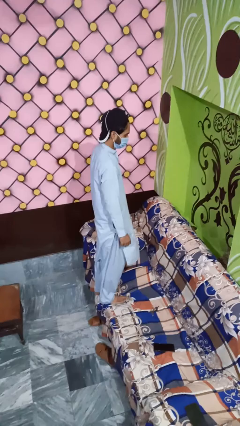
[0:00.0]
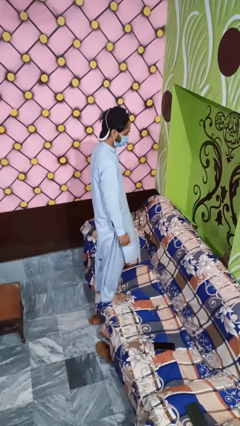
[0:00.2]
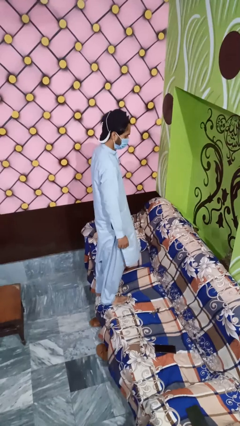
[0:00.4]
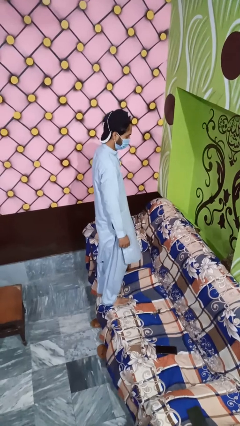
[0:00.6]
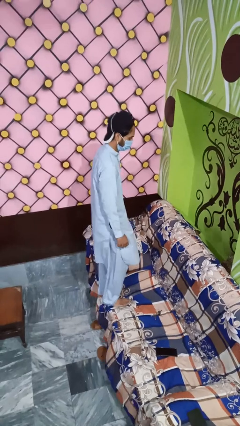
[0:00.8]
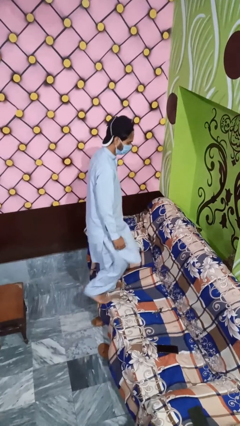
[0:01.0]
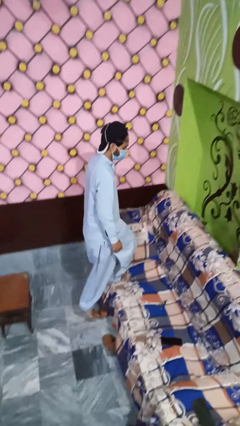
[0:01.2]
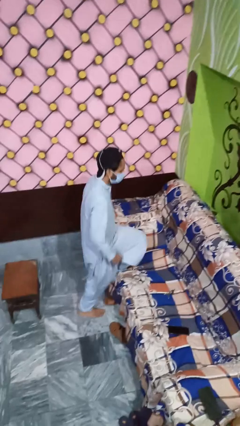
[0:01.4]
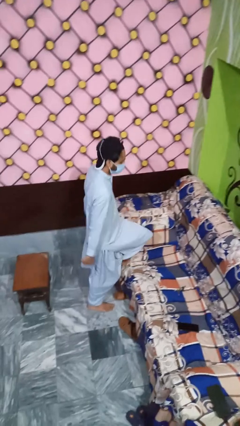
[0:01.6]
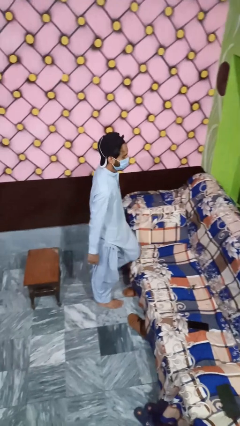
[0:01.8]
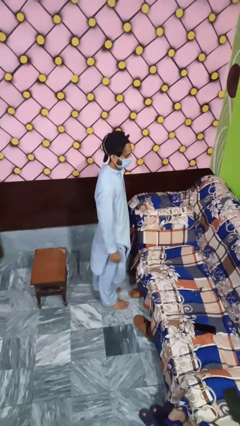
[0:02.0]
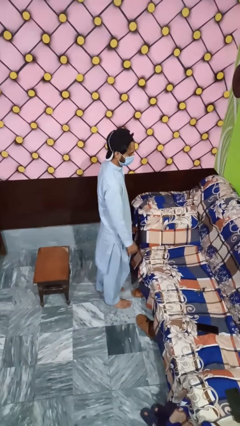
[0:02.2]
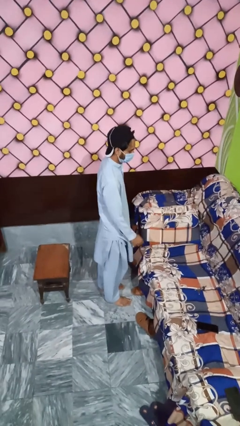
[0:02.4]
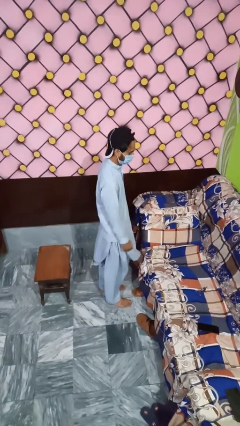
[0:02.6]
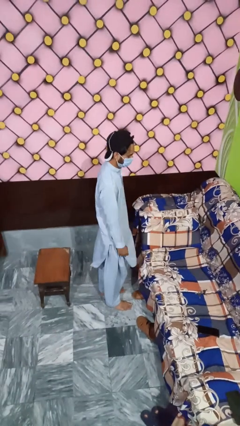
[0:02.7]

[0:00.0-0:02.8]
person climbs off couch

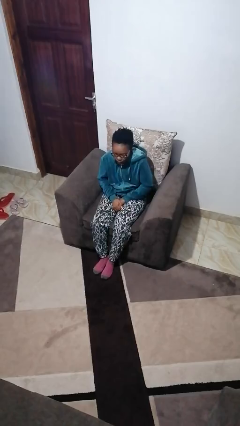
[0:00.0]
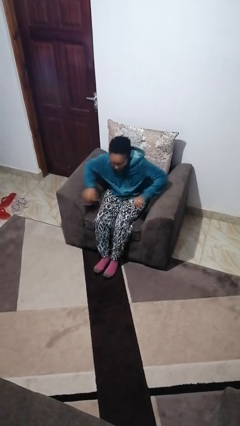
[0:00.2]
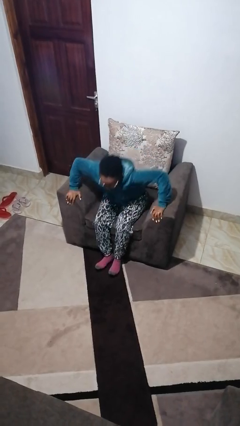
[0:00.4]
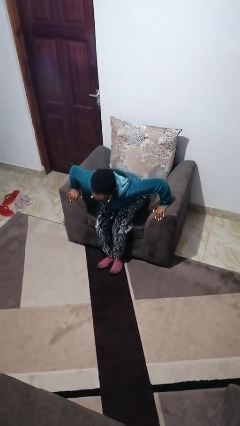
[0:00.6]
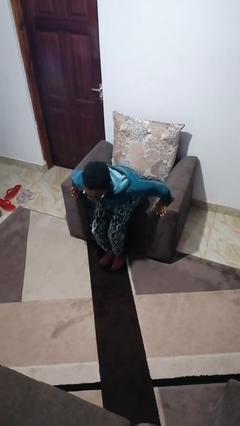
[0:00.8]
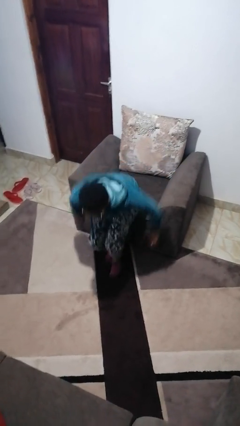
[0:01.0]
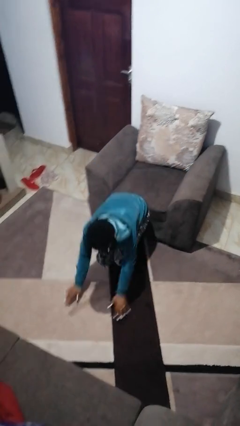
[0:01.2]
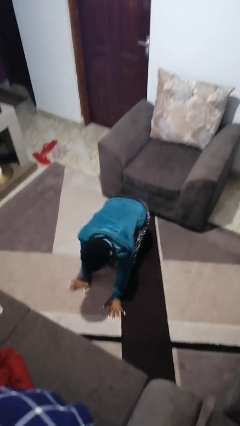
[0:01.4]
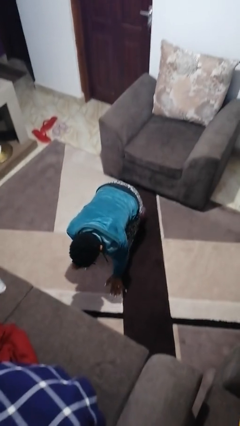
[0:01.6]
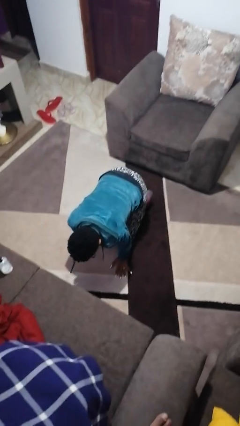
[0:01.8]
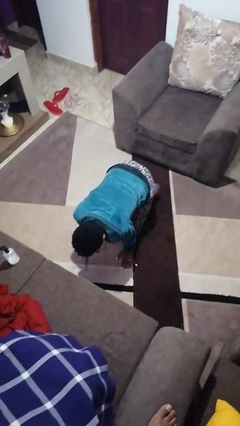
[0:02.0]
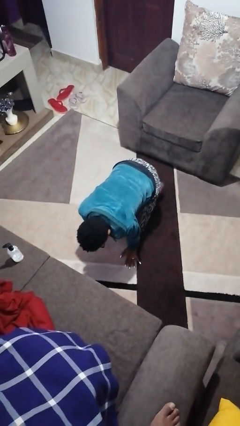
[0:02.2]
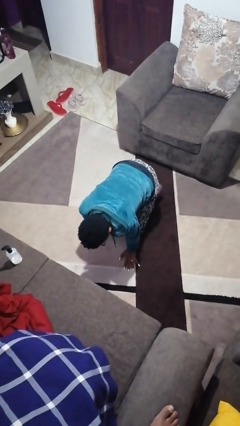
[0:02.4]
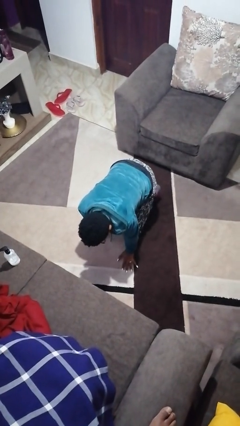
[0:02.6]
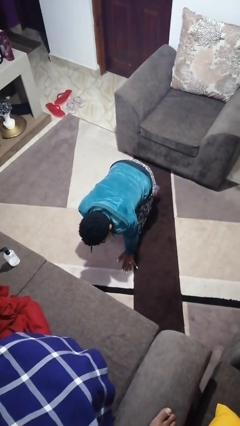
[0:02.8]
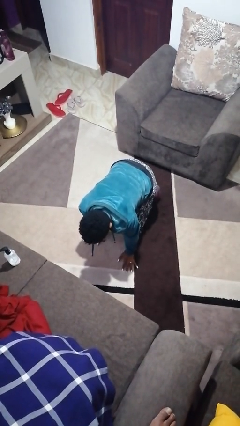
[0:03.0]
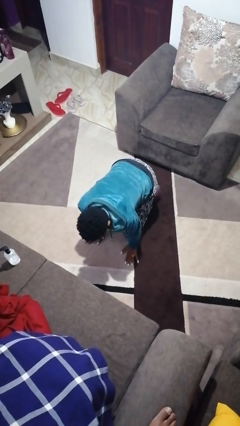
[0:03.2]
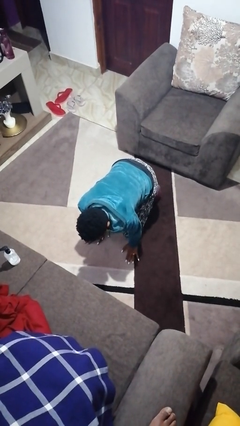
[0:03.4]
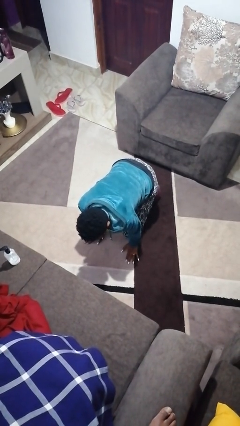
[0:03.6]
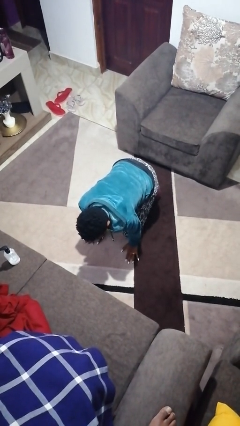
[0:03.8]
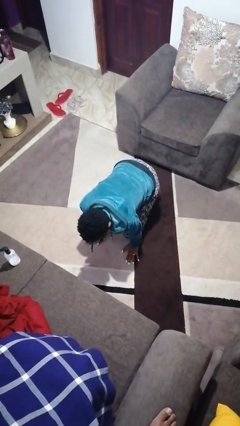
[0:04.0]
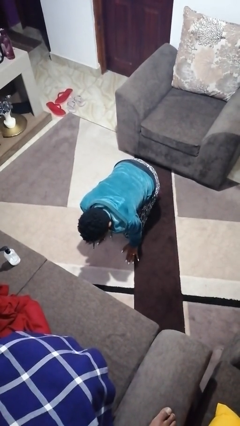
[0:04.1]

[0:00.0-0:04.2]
person falls from chair

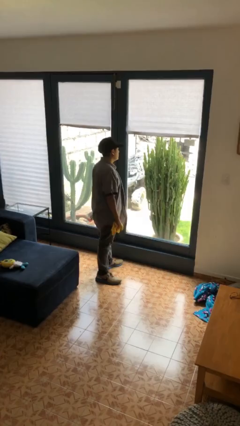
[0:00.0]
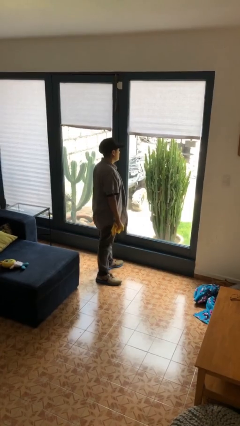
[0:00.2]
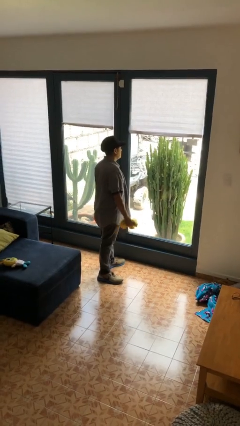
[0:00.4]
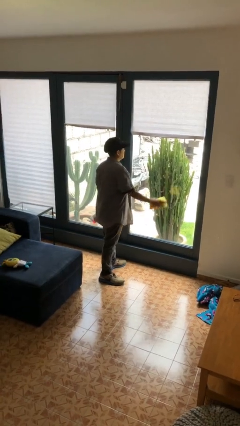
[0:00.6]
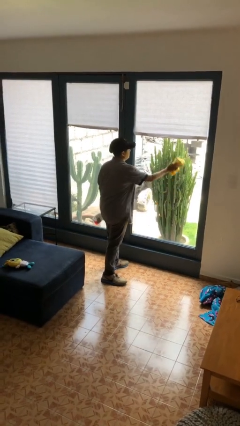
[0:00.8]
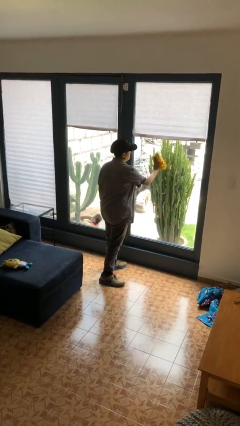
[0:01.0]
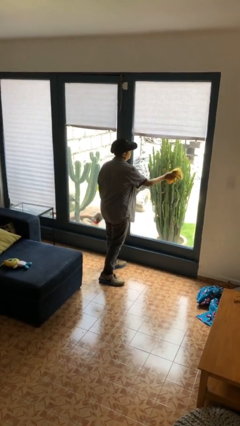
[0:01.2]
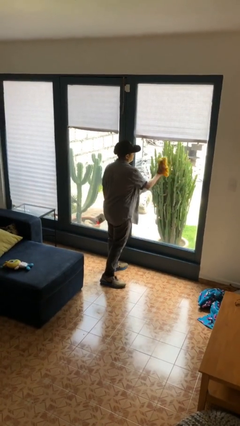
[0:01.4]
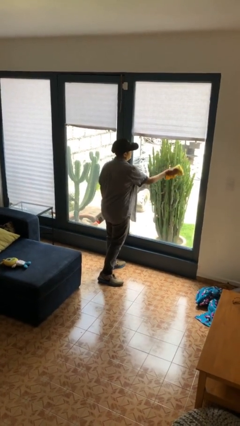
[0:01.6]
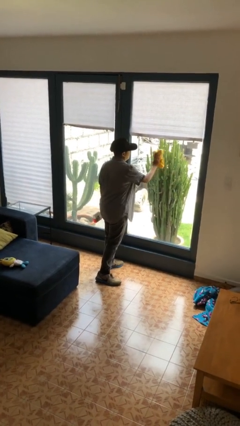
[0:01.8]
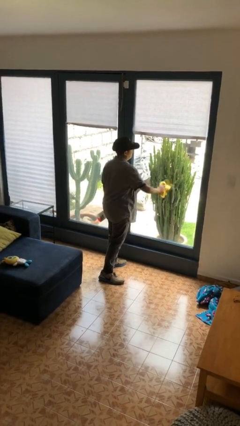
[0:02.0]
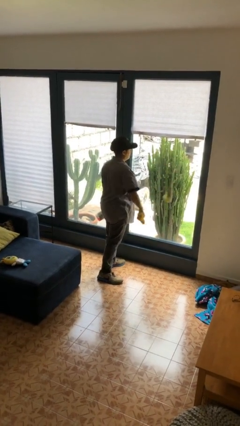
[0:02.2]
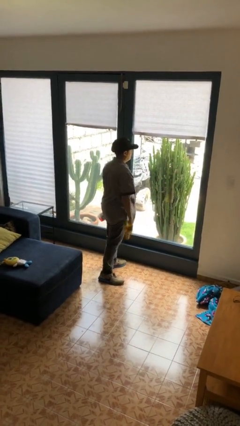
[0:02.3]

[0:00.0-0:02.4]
person washes window

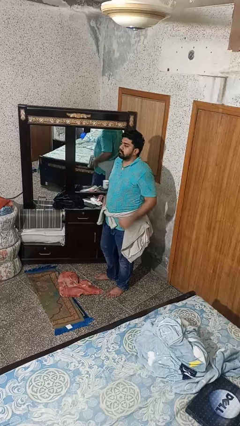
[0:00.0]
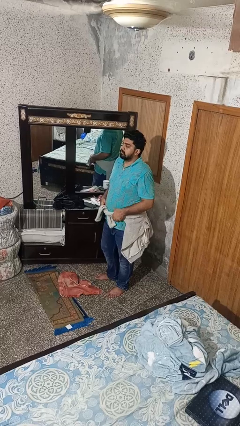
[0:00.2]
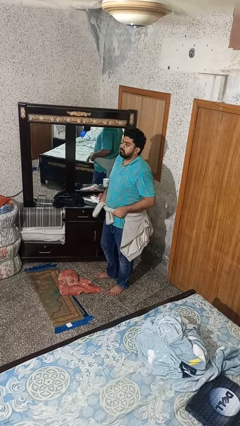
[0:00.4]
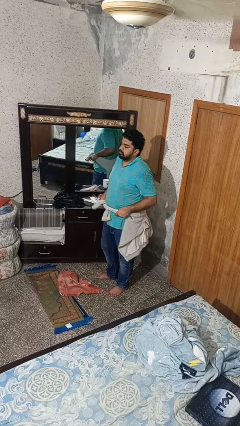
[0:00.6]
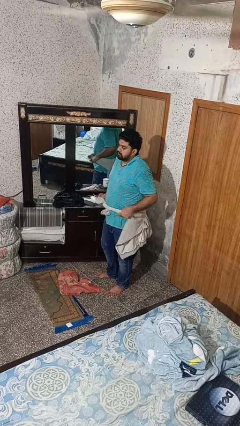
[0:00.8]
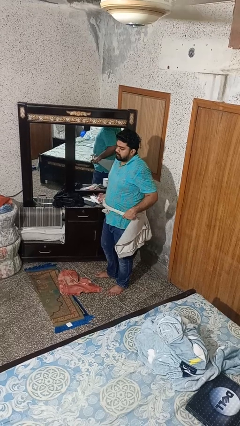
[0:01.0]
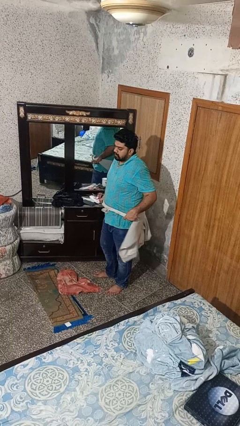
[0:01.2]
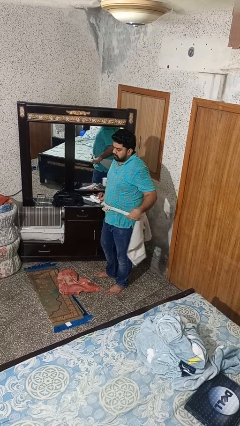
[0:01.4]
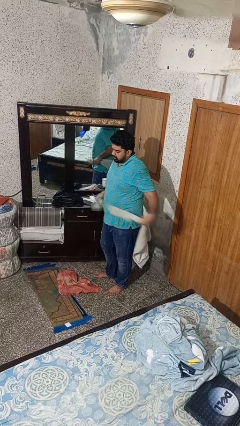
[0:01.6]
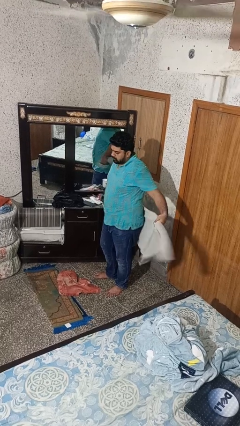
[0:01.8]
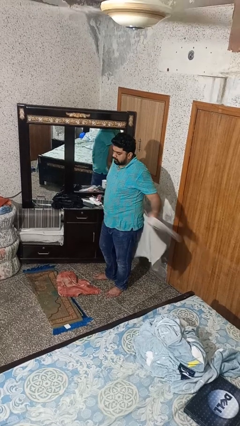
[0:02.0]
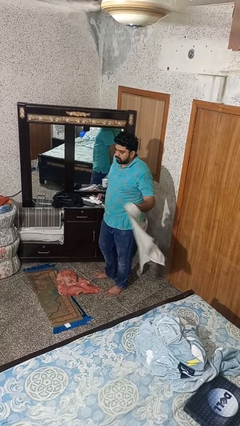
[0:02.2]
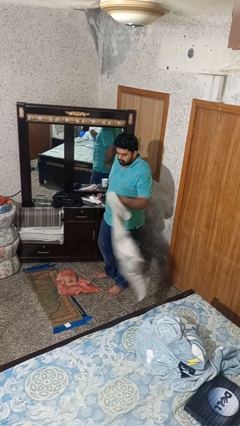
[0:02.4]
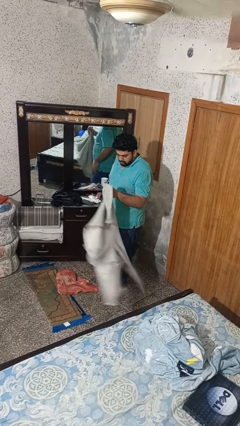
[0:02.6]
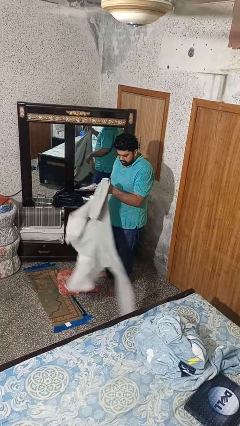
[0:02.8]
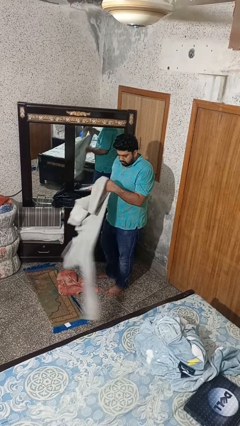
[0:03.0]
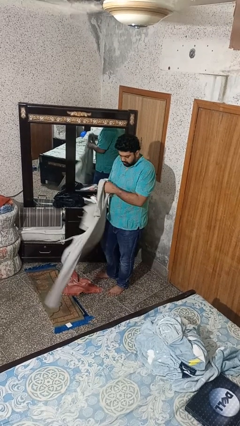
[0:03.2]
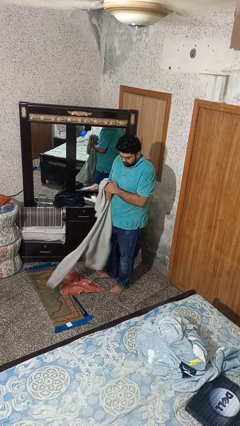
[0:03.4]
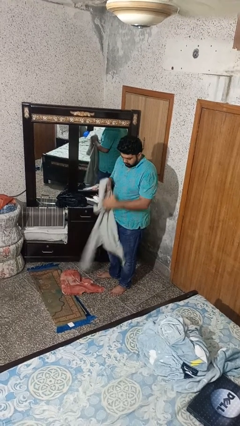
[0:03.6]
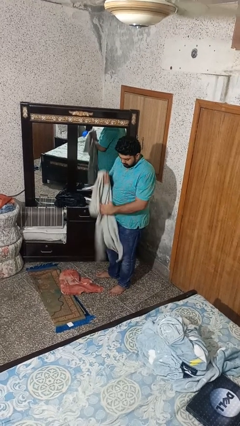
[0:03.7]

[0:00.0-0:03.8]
person unties jacket around waist

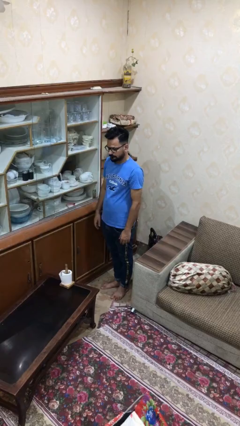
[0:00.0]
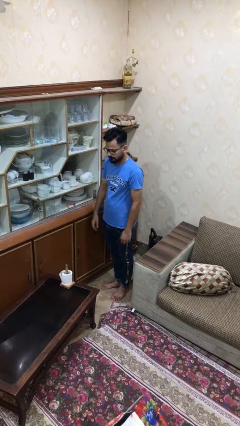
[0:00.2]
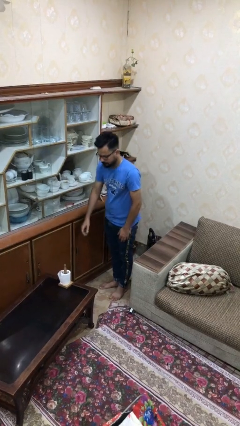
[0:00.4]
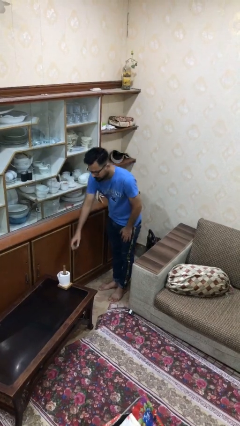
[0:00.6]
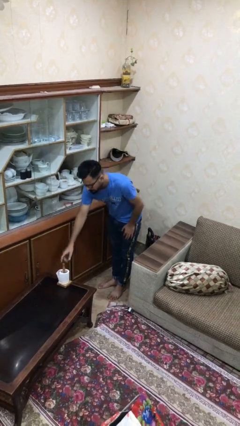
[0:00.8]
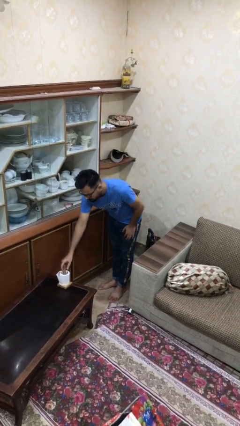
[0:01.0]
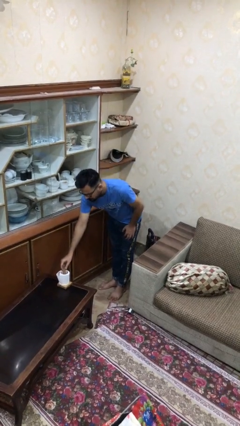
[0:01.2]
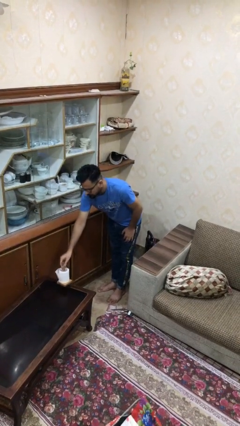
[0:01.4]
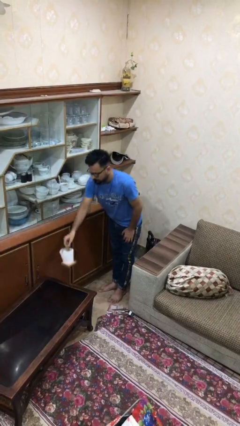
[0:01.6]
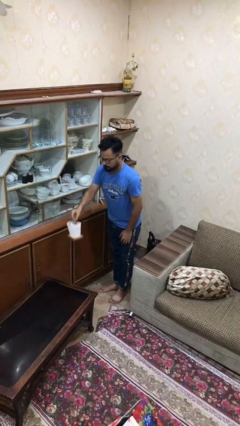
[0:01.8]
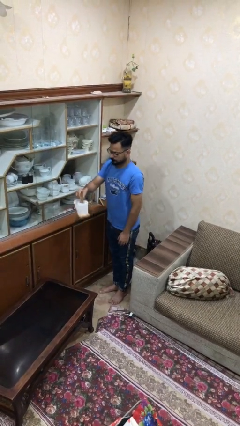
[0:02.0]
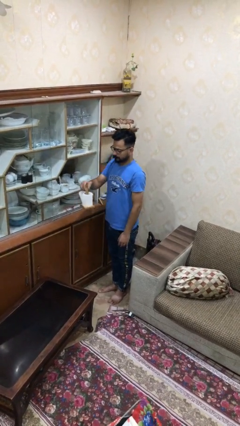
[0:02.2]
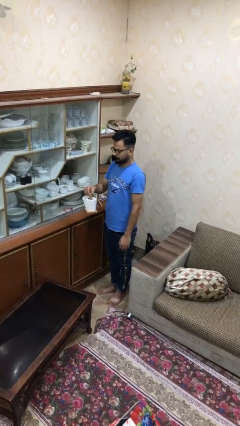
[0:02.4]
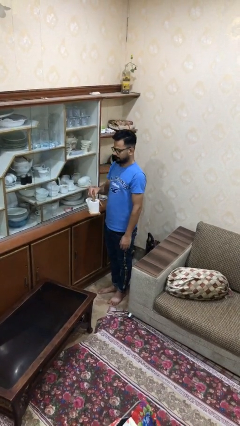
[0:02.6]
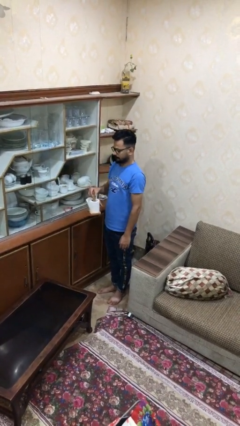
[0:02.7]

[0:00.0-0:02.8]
person picks up object from table

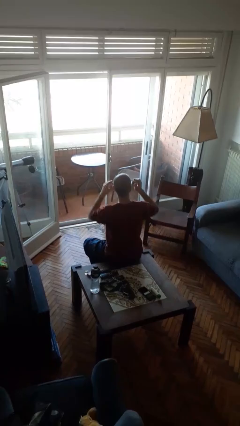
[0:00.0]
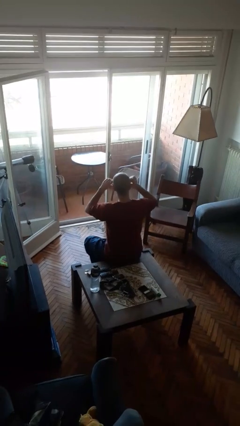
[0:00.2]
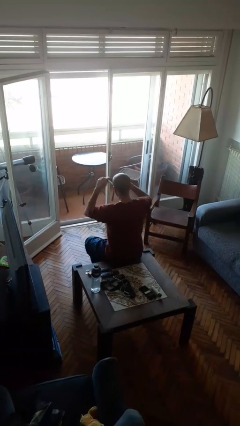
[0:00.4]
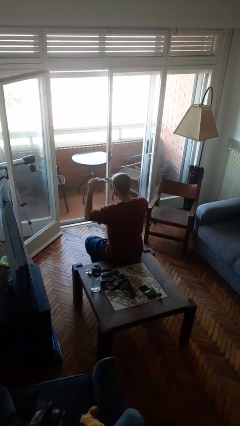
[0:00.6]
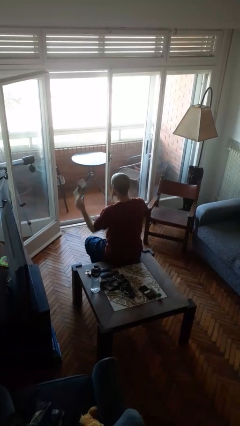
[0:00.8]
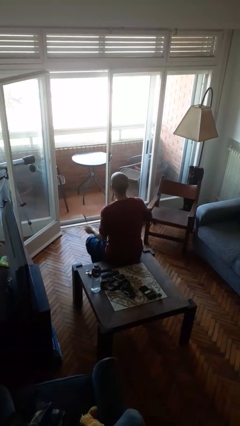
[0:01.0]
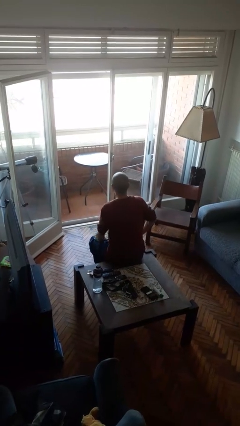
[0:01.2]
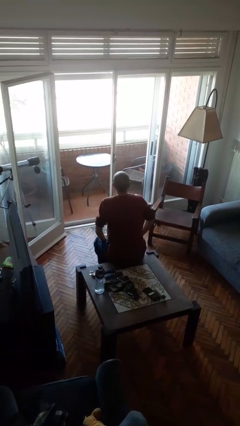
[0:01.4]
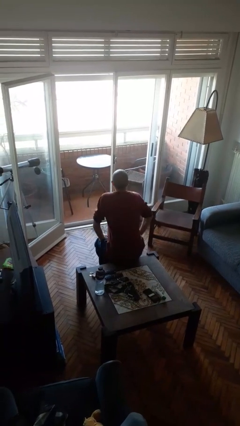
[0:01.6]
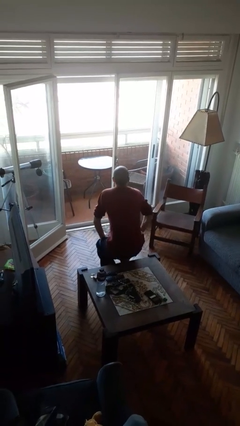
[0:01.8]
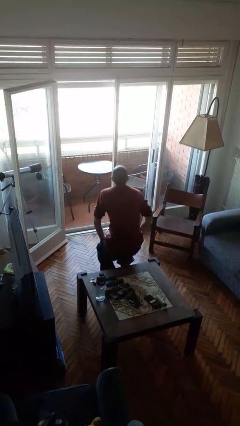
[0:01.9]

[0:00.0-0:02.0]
person takes off sunglasses
